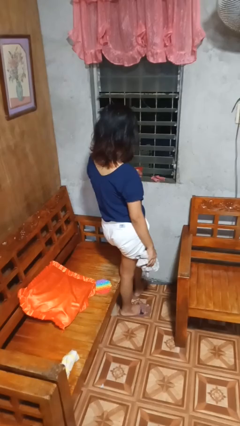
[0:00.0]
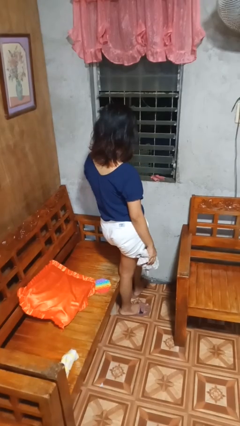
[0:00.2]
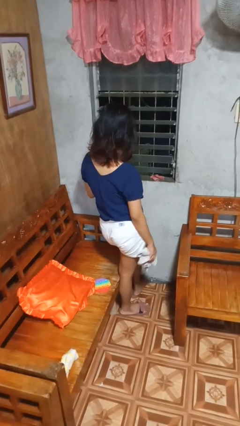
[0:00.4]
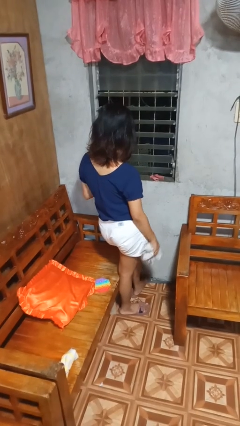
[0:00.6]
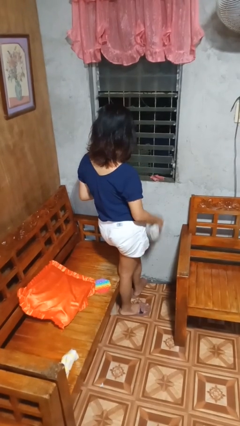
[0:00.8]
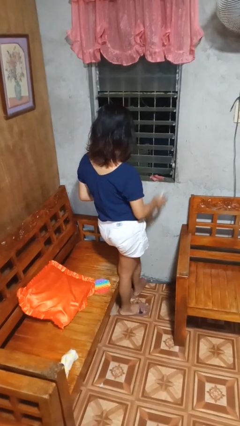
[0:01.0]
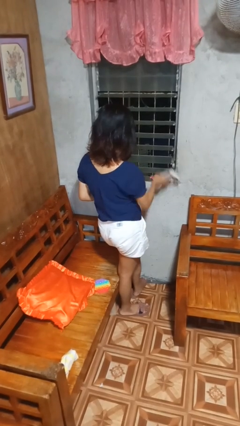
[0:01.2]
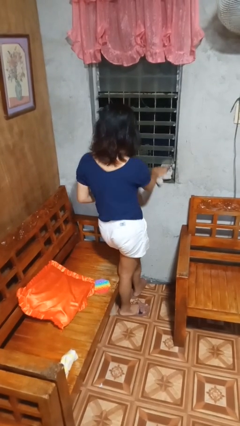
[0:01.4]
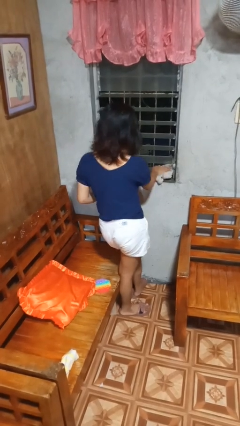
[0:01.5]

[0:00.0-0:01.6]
person sprays from bottle

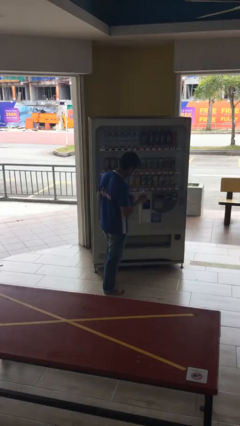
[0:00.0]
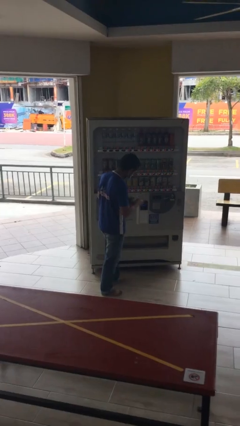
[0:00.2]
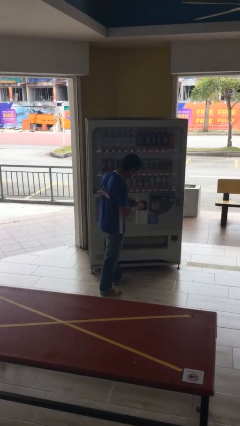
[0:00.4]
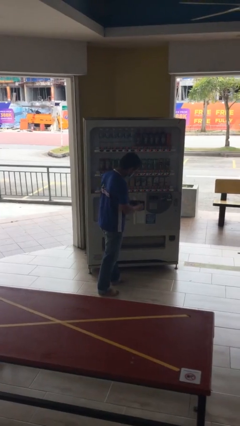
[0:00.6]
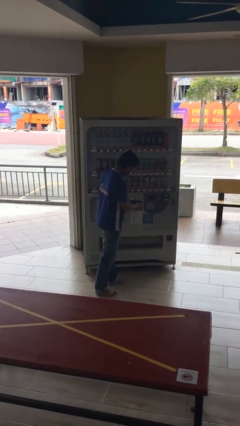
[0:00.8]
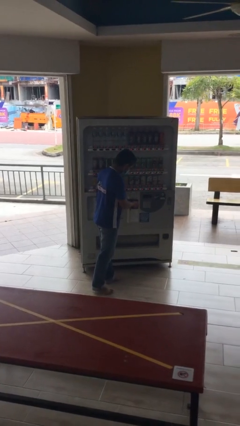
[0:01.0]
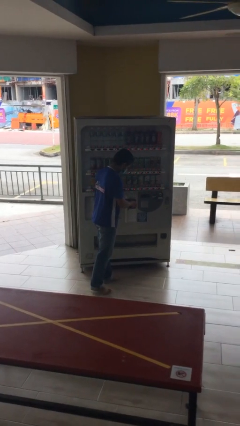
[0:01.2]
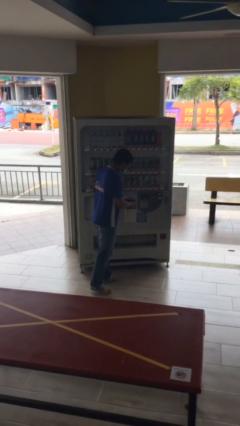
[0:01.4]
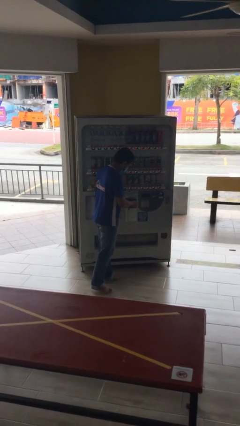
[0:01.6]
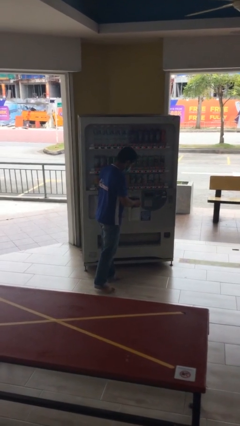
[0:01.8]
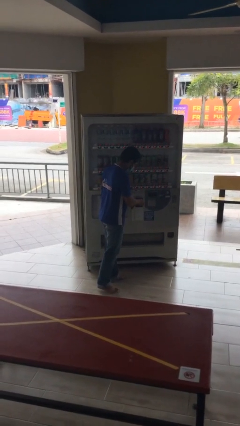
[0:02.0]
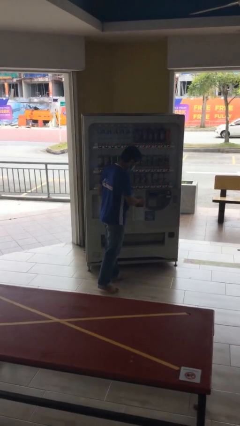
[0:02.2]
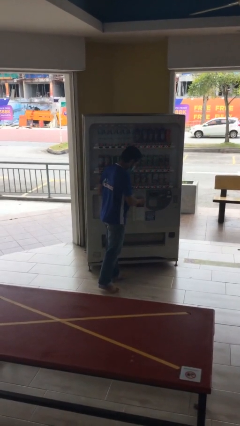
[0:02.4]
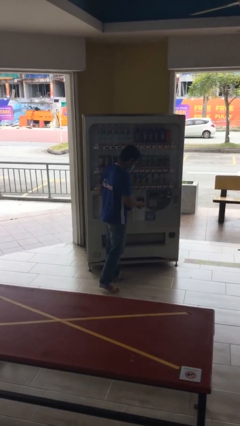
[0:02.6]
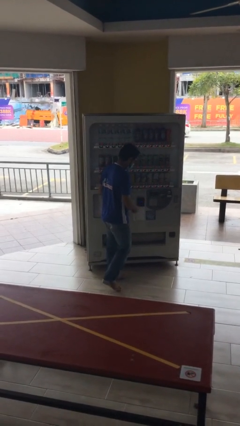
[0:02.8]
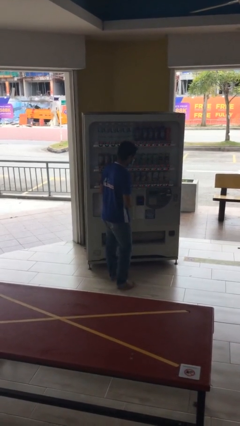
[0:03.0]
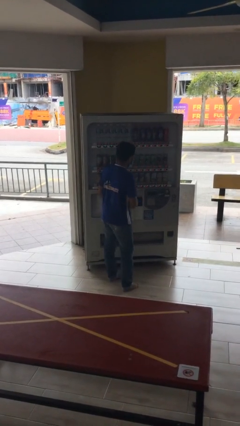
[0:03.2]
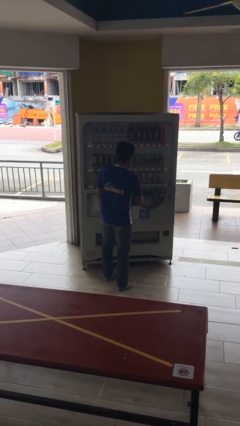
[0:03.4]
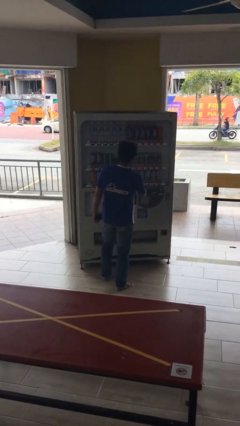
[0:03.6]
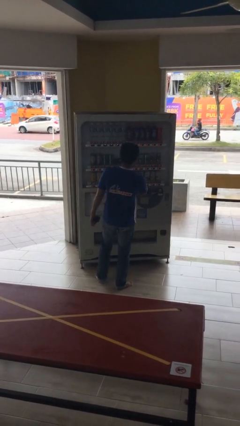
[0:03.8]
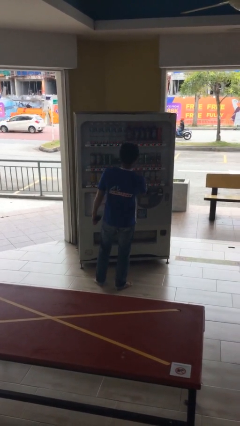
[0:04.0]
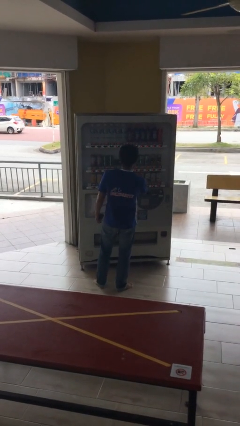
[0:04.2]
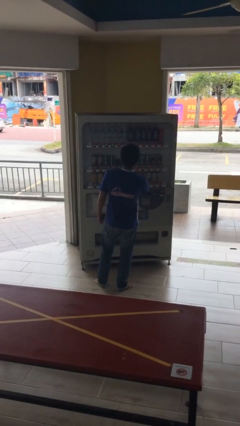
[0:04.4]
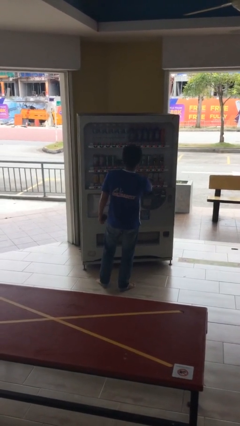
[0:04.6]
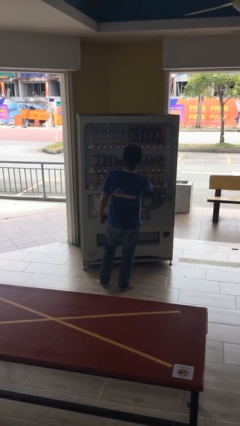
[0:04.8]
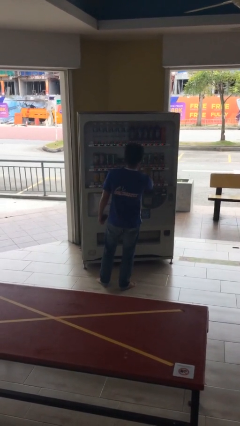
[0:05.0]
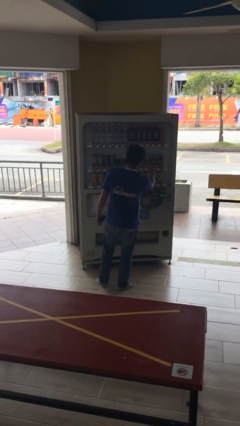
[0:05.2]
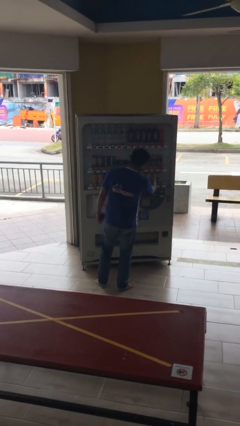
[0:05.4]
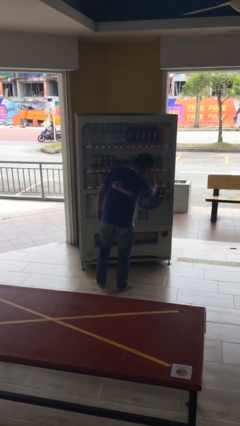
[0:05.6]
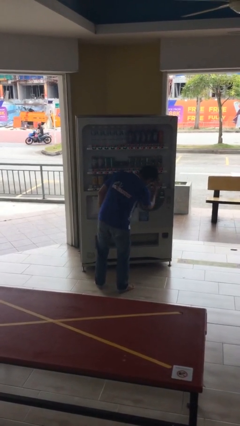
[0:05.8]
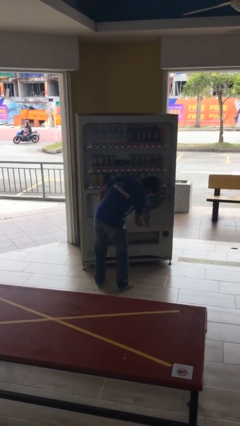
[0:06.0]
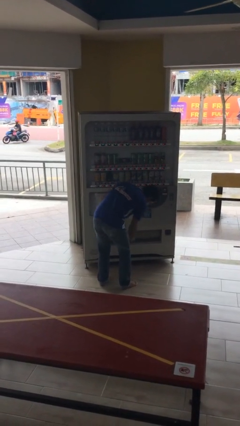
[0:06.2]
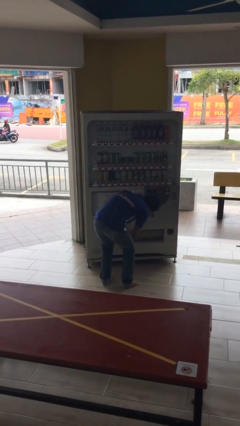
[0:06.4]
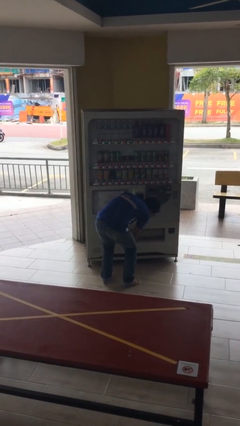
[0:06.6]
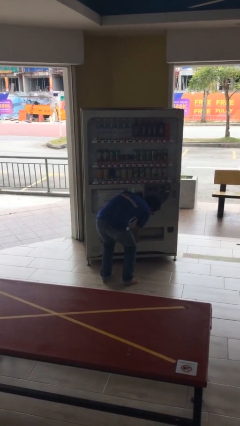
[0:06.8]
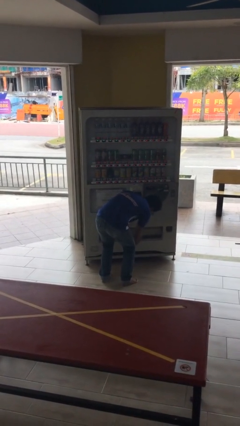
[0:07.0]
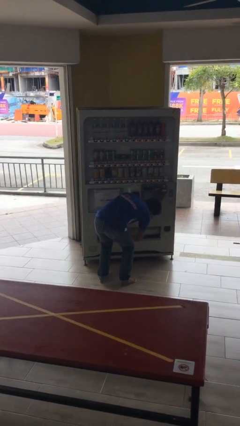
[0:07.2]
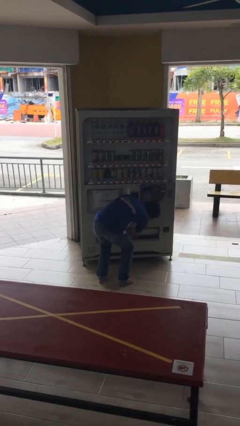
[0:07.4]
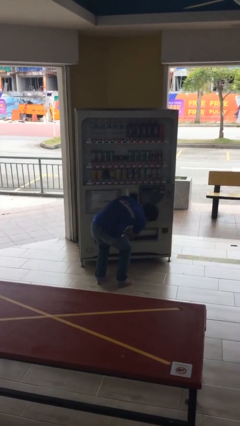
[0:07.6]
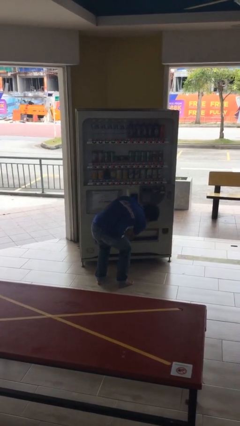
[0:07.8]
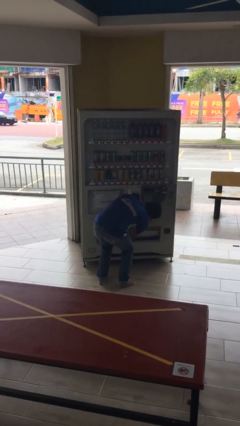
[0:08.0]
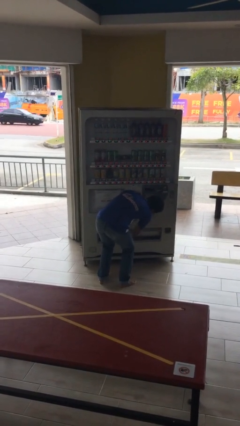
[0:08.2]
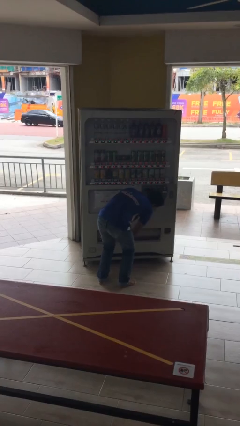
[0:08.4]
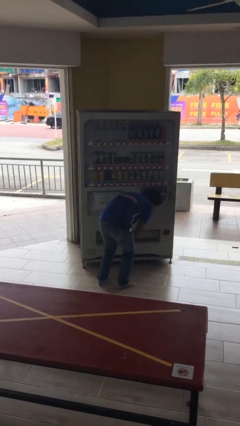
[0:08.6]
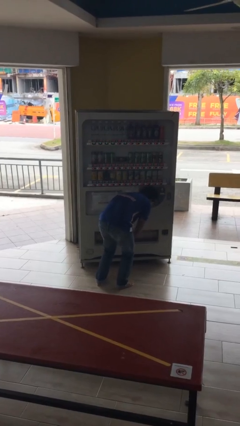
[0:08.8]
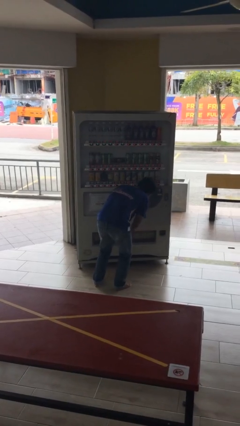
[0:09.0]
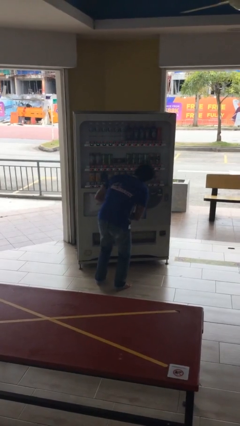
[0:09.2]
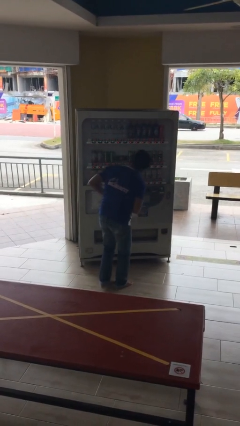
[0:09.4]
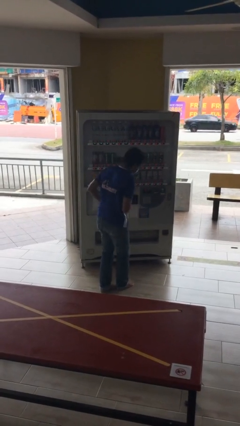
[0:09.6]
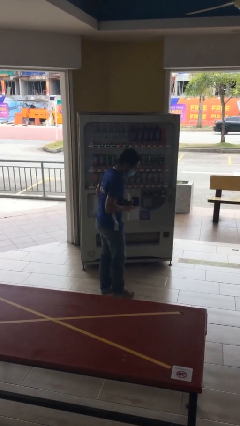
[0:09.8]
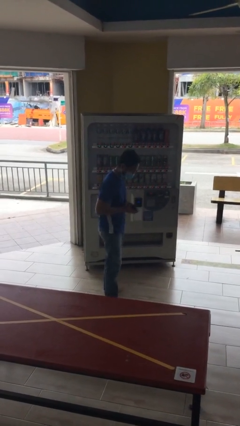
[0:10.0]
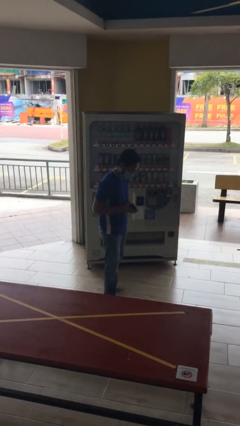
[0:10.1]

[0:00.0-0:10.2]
person purchases from machine

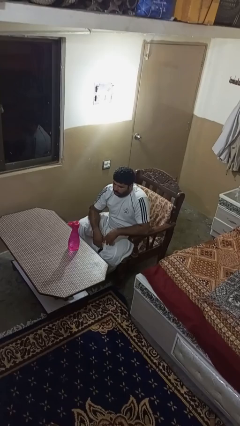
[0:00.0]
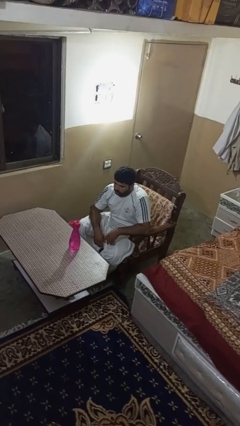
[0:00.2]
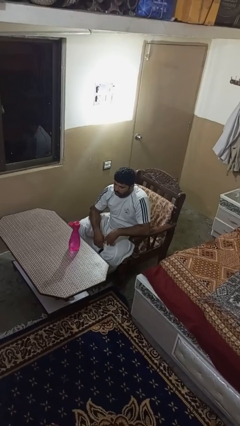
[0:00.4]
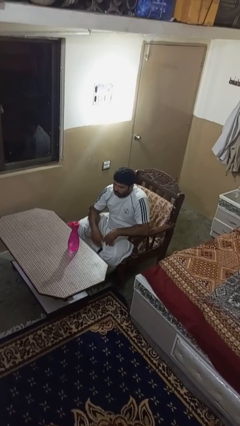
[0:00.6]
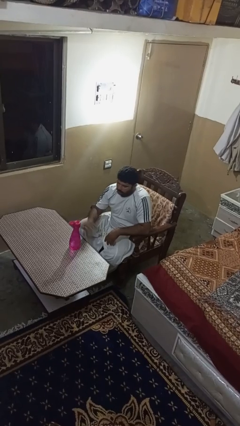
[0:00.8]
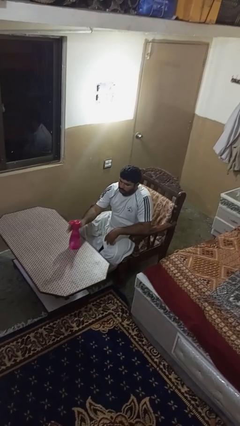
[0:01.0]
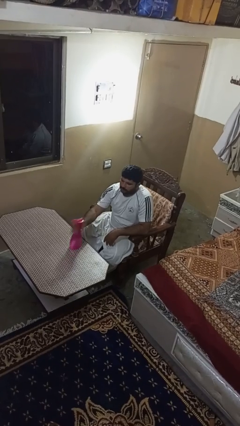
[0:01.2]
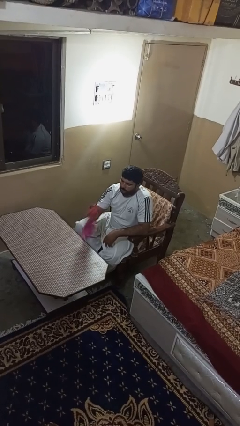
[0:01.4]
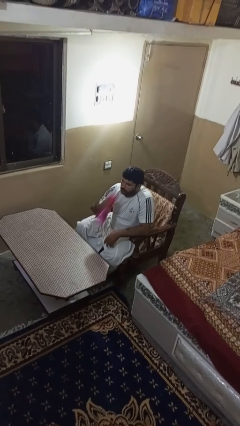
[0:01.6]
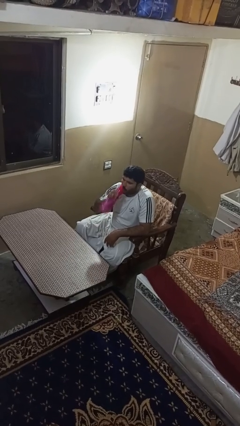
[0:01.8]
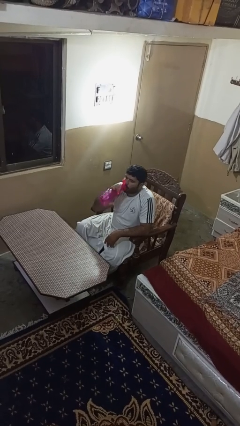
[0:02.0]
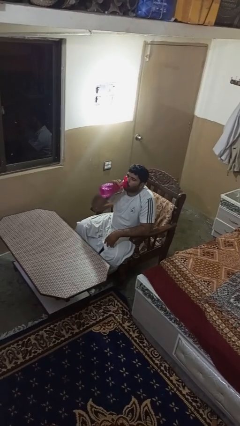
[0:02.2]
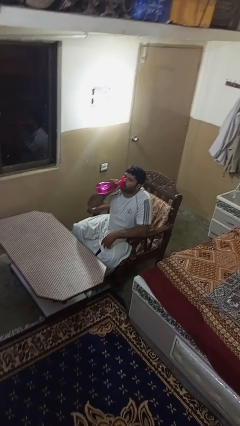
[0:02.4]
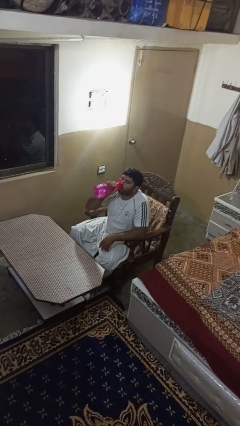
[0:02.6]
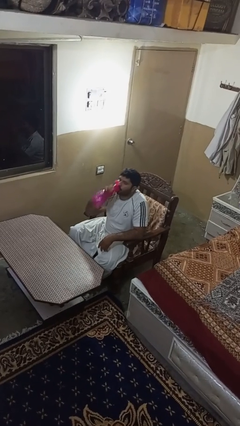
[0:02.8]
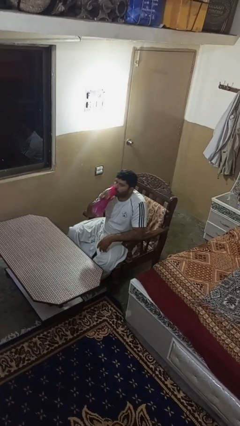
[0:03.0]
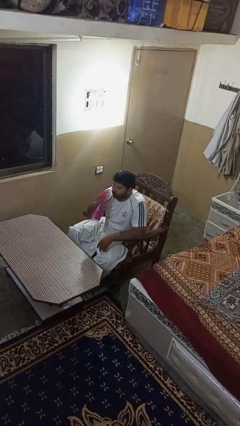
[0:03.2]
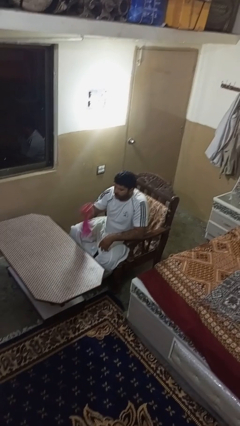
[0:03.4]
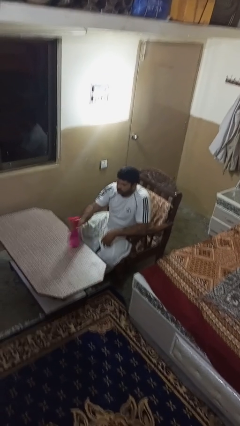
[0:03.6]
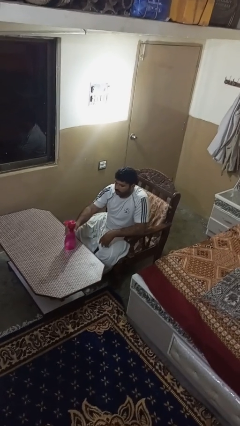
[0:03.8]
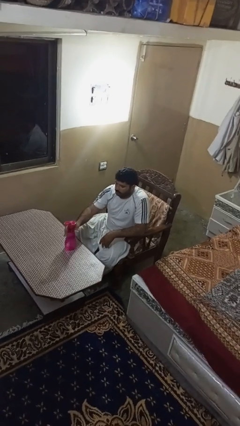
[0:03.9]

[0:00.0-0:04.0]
person drinks from bottle

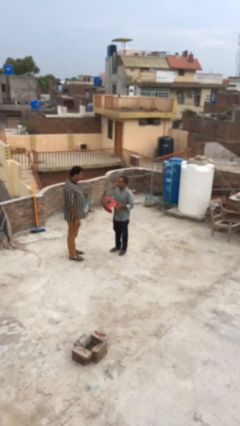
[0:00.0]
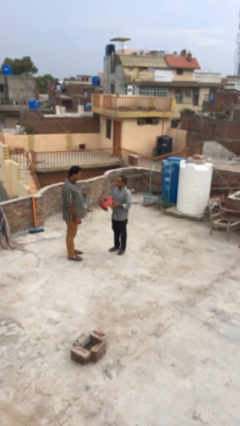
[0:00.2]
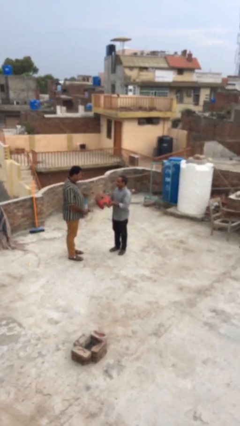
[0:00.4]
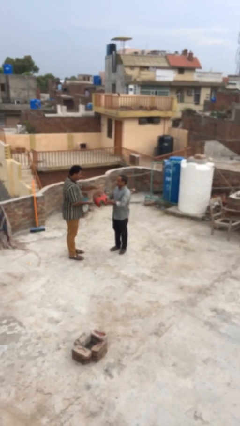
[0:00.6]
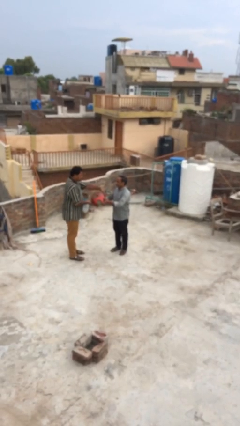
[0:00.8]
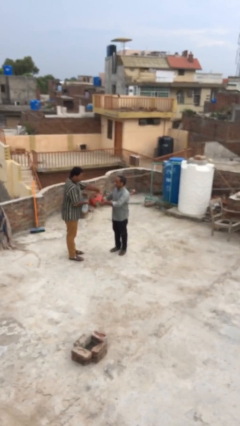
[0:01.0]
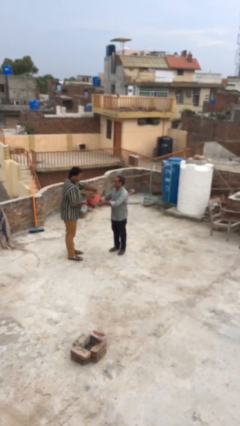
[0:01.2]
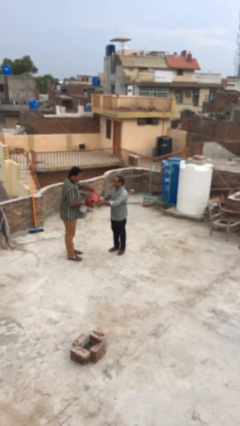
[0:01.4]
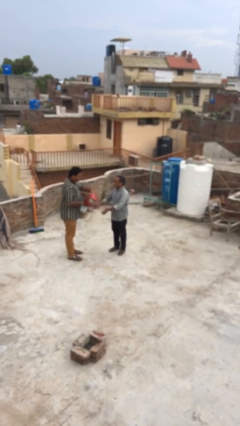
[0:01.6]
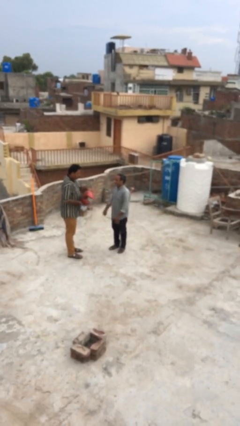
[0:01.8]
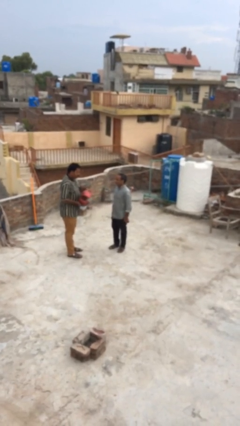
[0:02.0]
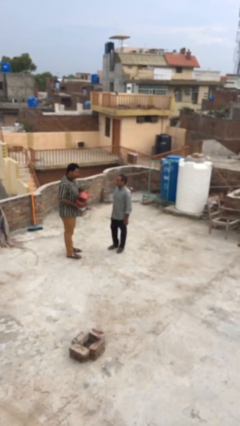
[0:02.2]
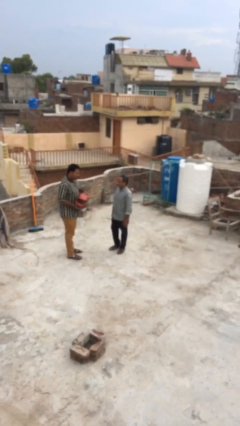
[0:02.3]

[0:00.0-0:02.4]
person transfers object to person
